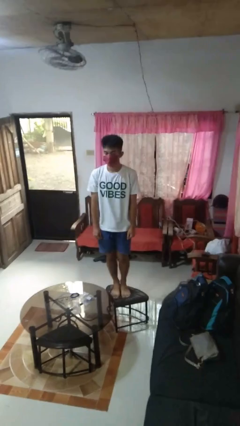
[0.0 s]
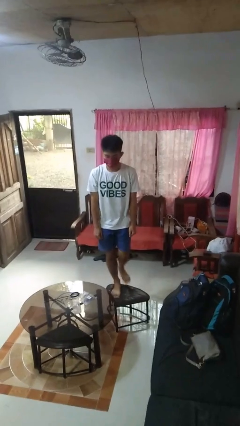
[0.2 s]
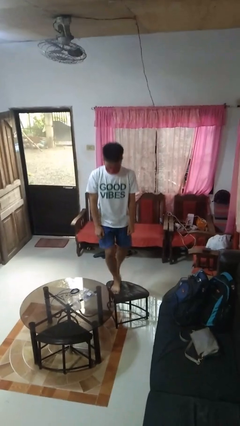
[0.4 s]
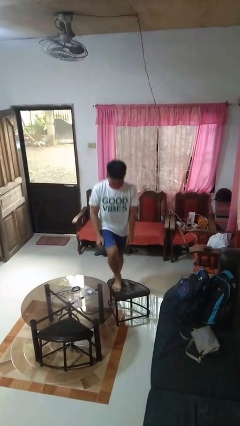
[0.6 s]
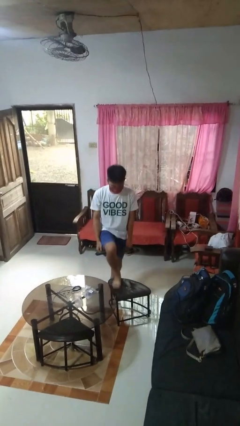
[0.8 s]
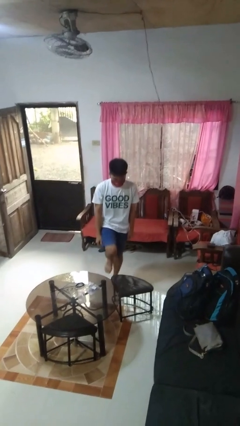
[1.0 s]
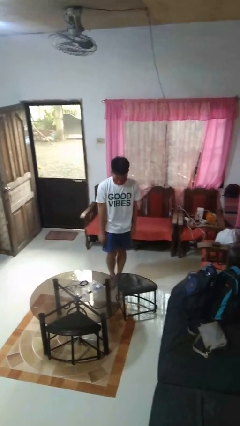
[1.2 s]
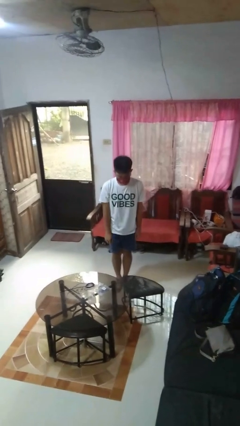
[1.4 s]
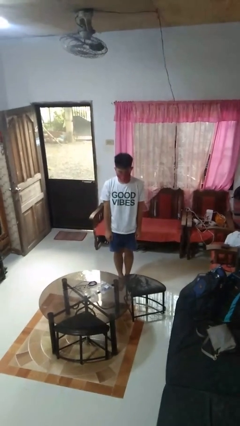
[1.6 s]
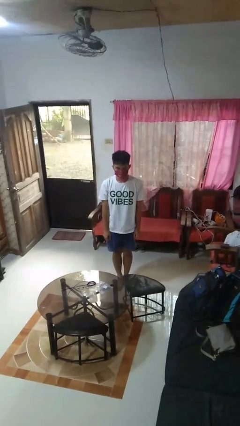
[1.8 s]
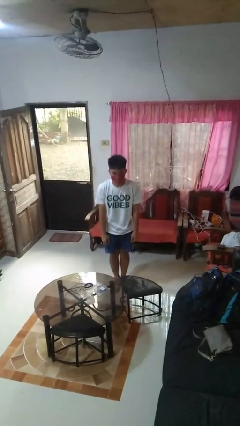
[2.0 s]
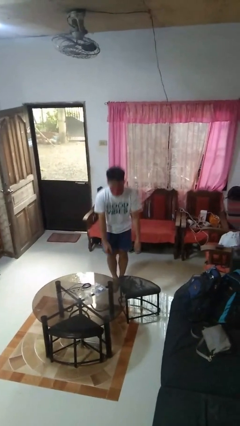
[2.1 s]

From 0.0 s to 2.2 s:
person climbs off chair

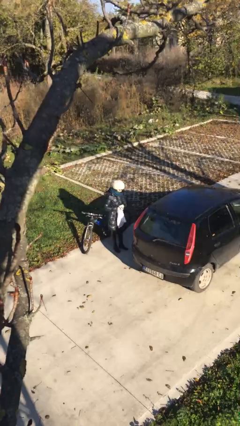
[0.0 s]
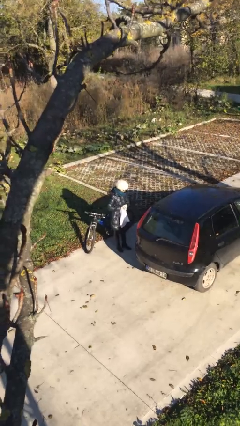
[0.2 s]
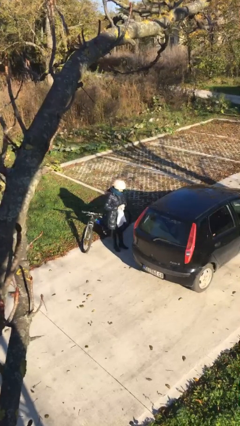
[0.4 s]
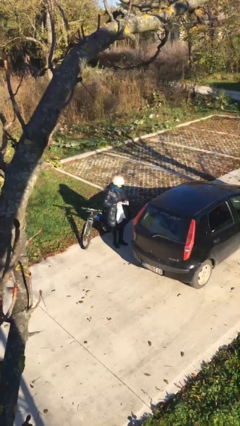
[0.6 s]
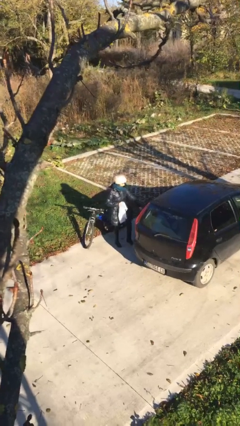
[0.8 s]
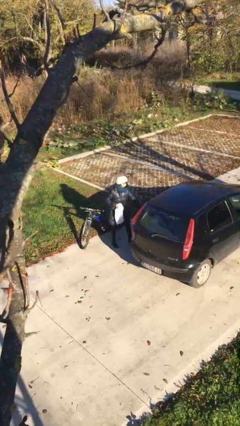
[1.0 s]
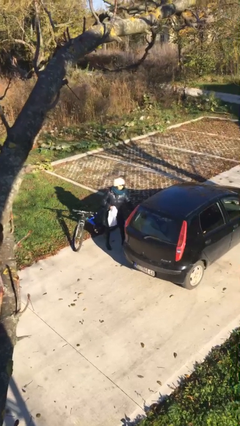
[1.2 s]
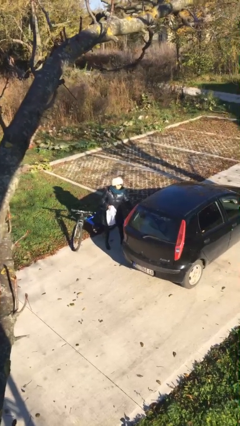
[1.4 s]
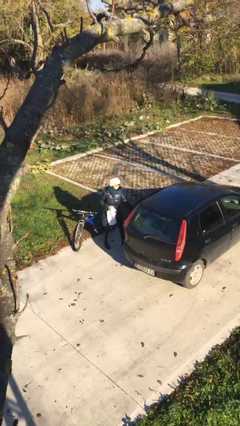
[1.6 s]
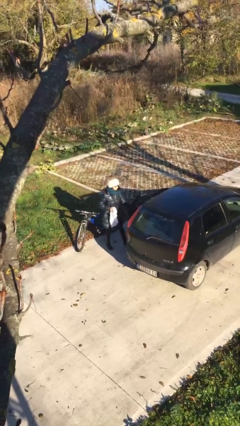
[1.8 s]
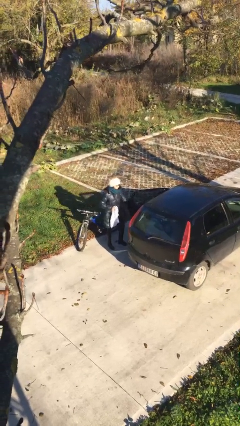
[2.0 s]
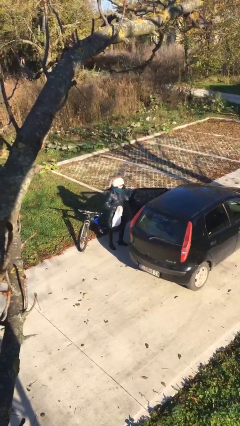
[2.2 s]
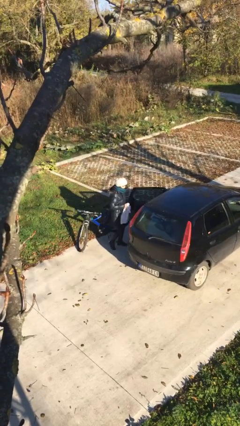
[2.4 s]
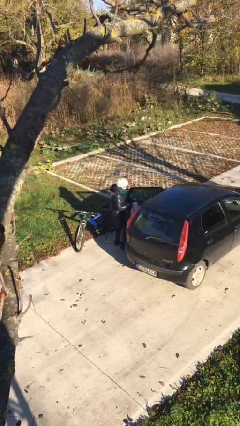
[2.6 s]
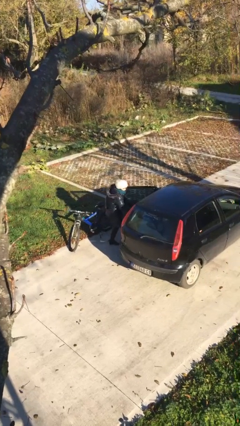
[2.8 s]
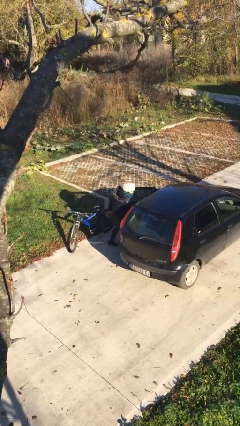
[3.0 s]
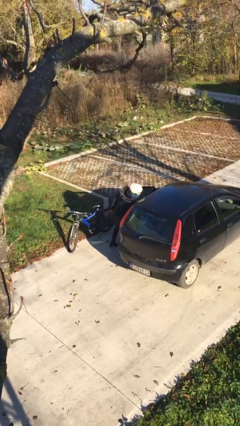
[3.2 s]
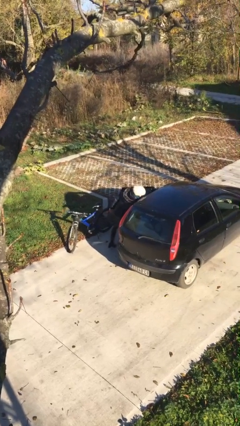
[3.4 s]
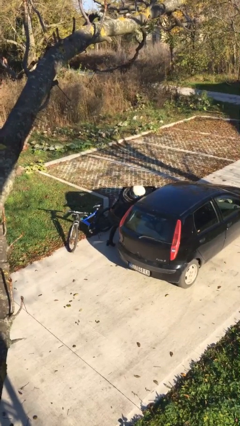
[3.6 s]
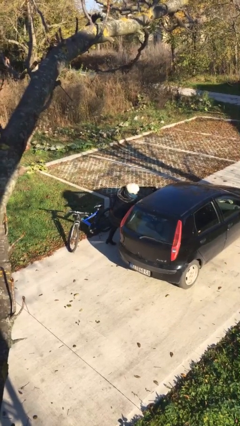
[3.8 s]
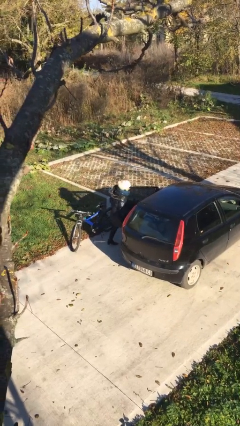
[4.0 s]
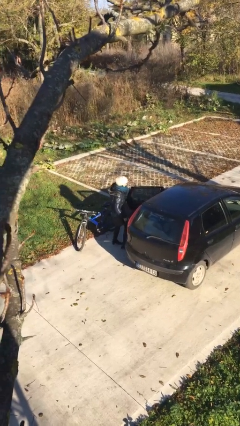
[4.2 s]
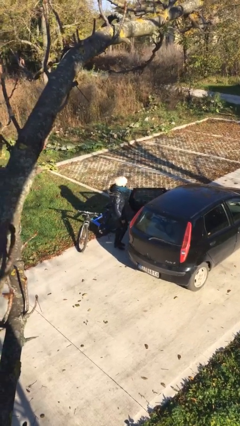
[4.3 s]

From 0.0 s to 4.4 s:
person loads car

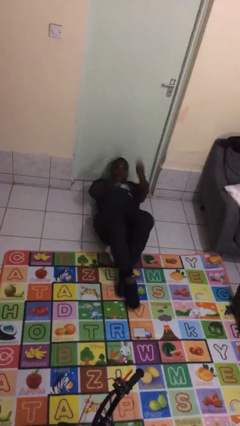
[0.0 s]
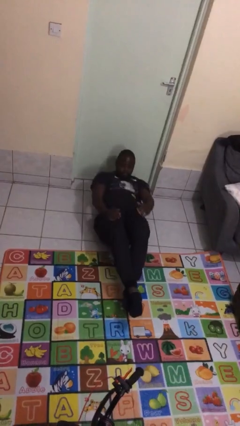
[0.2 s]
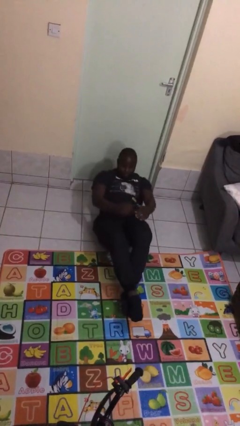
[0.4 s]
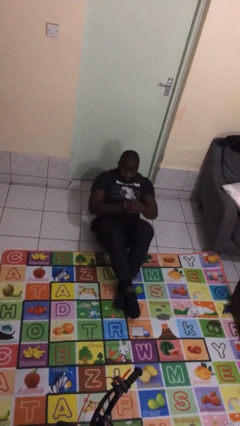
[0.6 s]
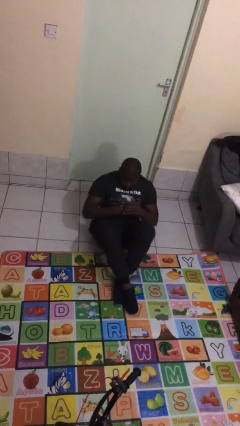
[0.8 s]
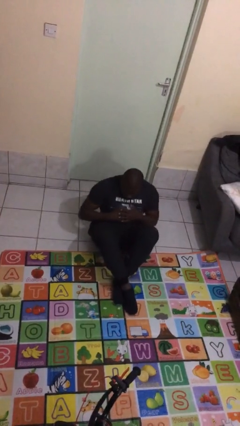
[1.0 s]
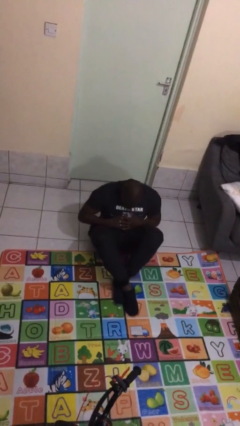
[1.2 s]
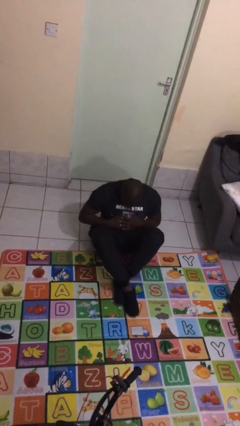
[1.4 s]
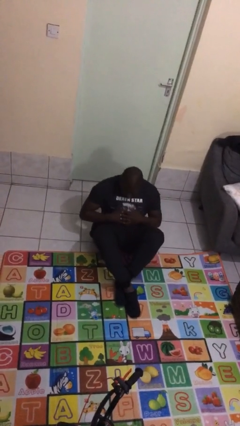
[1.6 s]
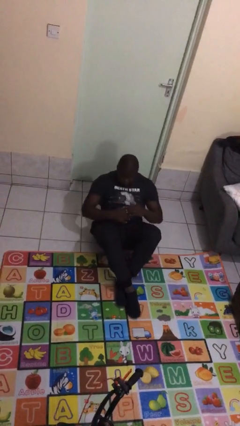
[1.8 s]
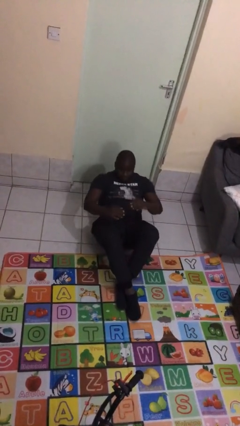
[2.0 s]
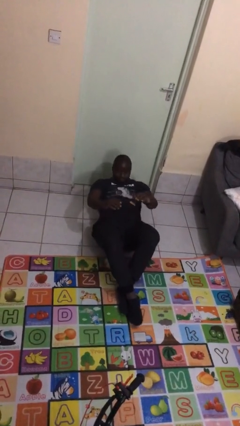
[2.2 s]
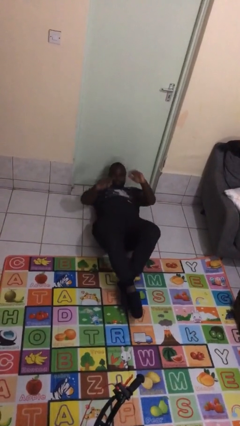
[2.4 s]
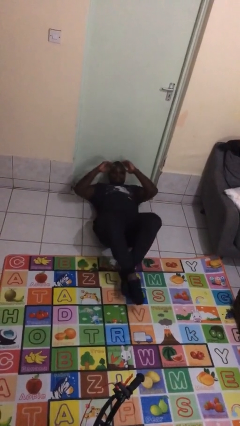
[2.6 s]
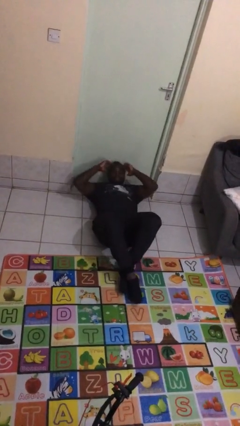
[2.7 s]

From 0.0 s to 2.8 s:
person exercises with situp

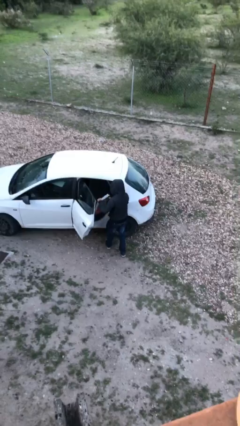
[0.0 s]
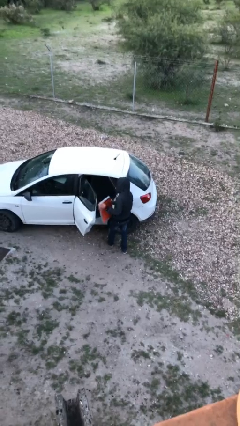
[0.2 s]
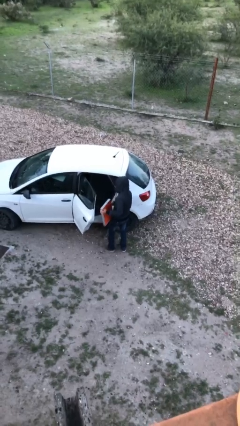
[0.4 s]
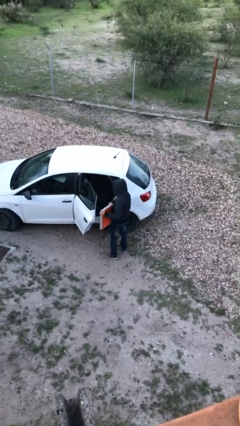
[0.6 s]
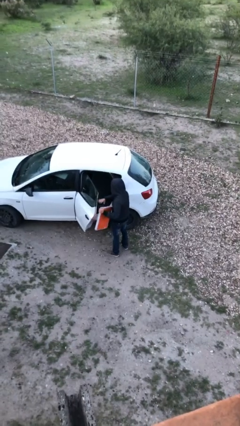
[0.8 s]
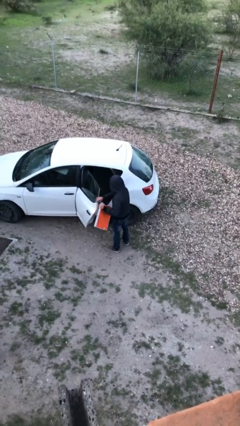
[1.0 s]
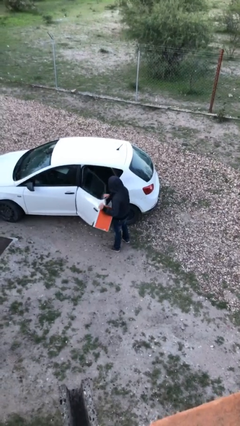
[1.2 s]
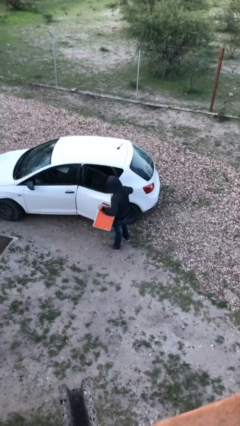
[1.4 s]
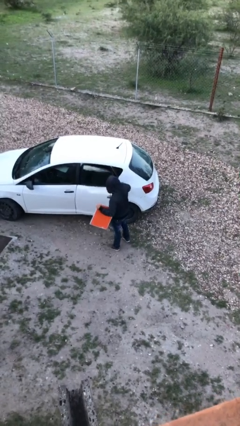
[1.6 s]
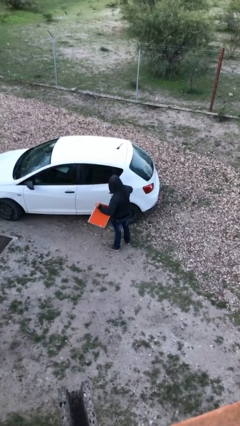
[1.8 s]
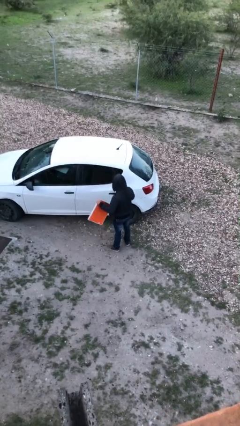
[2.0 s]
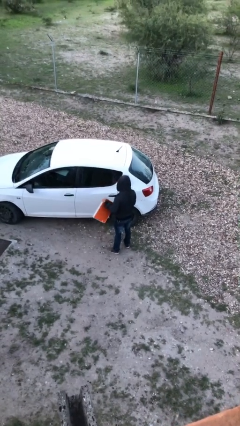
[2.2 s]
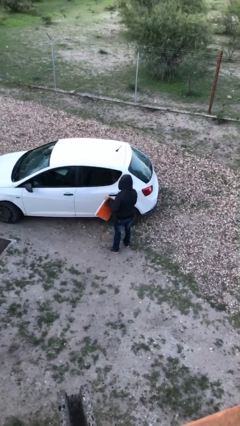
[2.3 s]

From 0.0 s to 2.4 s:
person closes car door

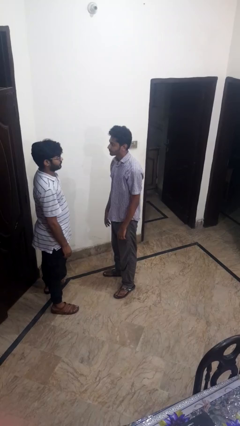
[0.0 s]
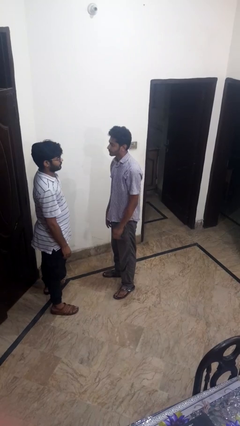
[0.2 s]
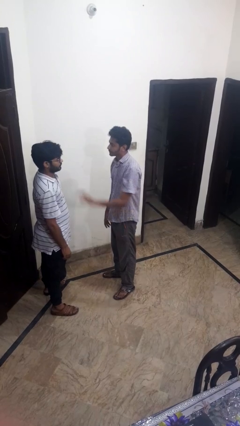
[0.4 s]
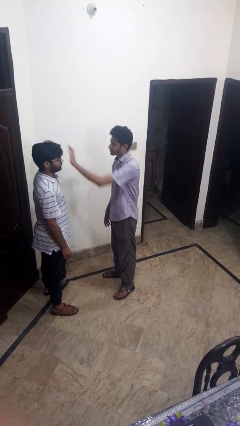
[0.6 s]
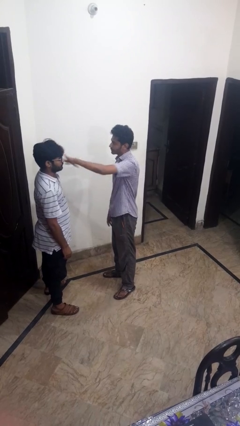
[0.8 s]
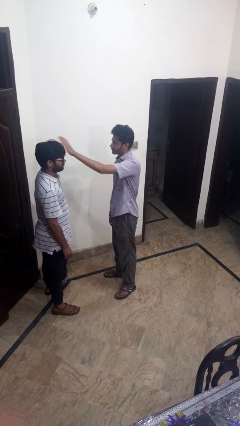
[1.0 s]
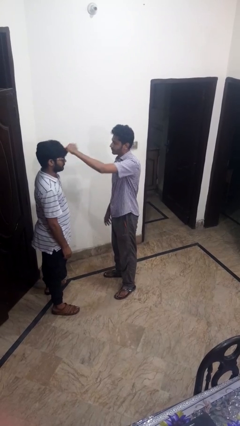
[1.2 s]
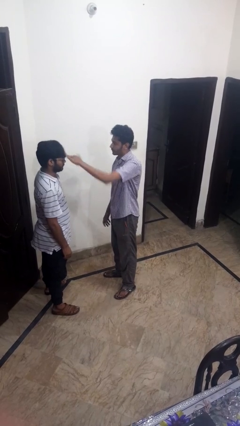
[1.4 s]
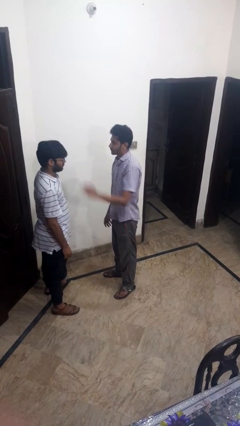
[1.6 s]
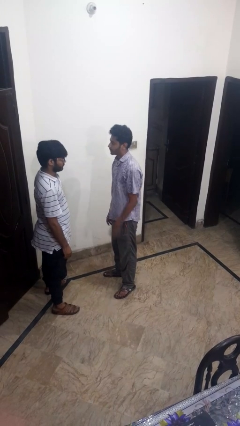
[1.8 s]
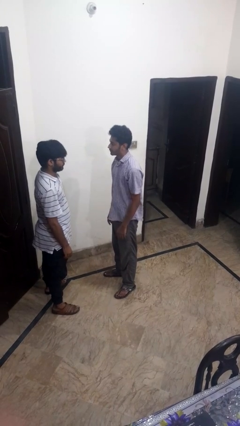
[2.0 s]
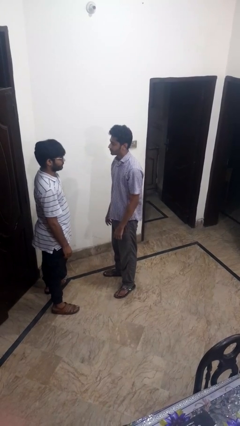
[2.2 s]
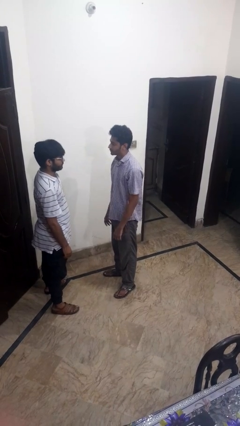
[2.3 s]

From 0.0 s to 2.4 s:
person grabs person by hair

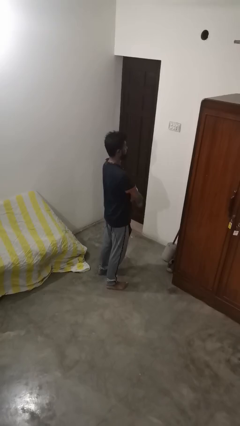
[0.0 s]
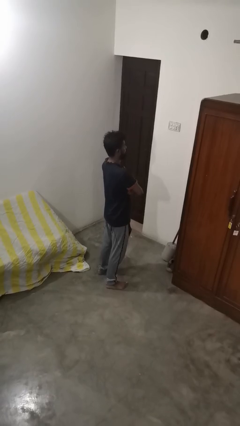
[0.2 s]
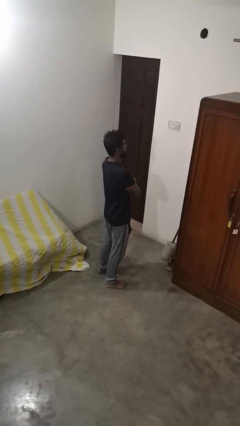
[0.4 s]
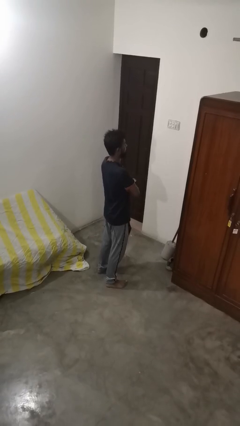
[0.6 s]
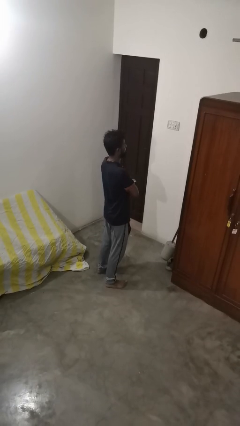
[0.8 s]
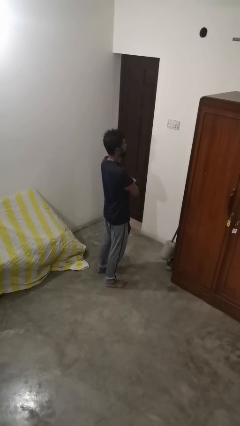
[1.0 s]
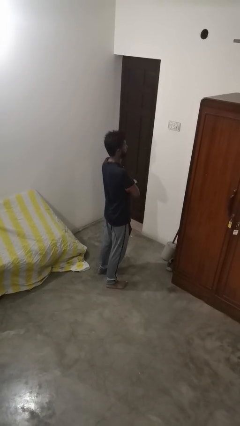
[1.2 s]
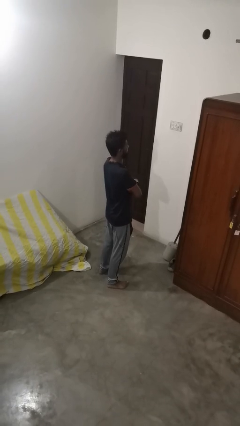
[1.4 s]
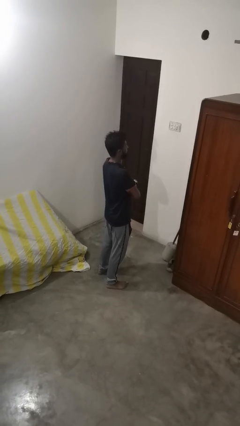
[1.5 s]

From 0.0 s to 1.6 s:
person crosses arms

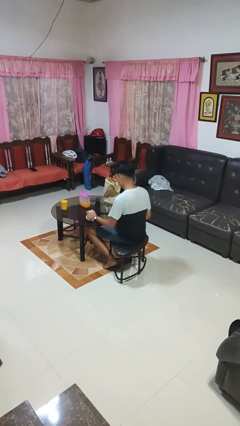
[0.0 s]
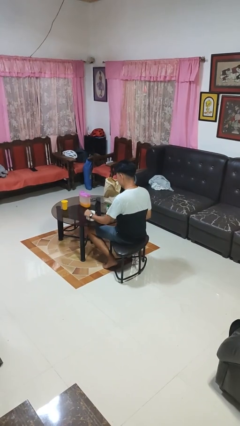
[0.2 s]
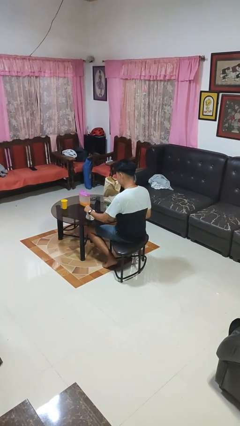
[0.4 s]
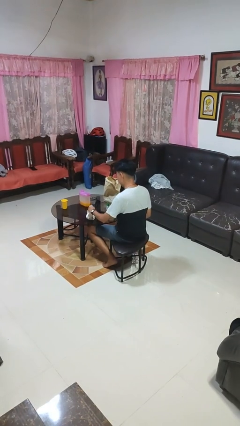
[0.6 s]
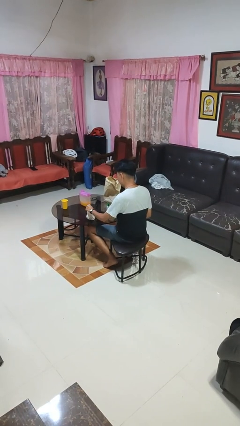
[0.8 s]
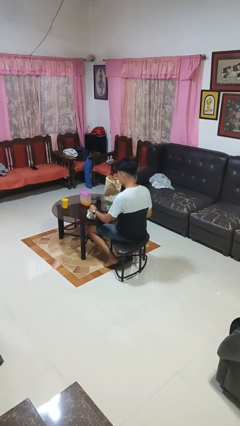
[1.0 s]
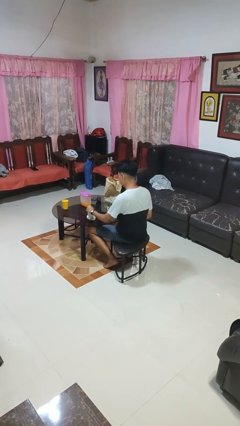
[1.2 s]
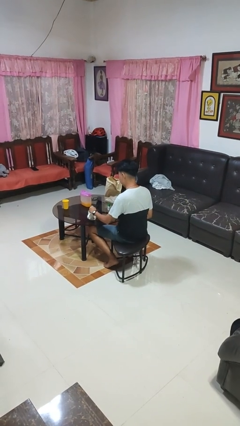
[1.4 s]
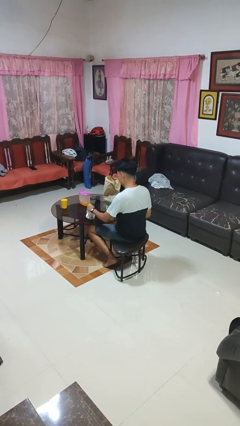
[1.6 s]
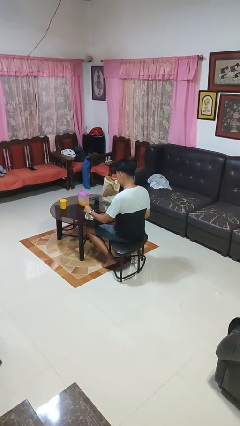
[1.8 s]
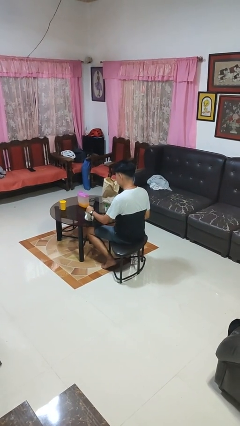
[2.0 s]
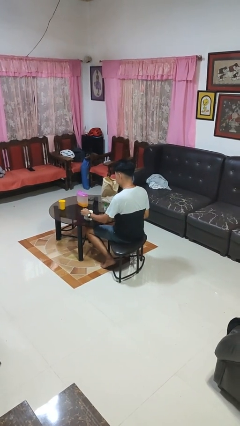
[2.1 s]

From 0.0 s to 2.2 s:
person stirs mug
